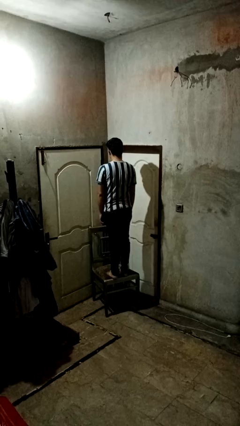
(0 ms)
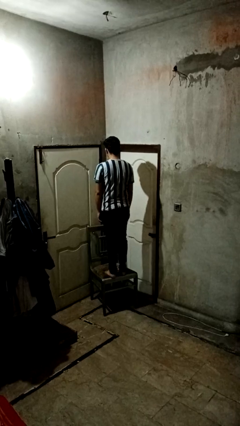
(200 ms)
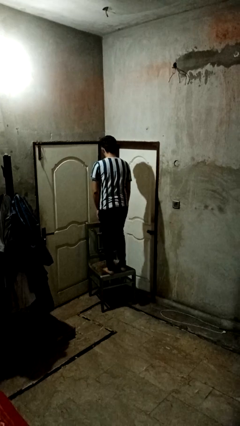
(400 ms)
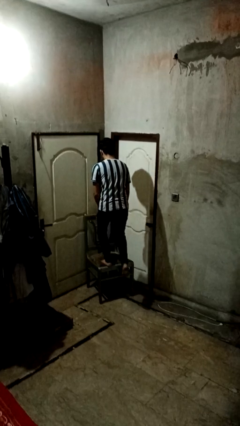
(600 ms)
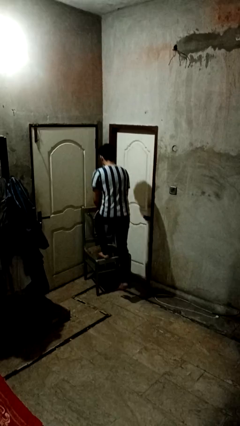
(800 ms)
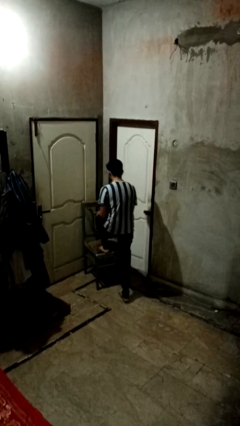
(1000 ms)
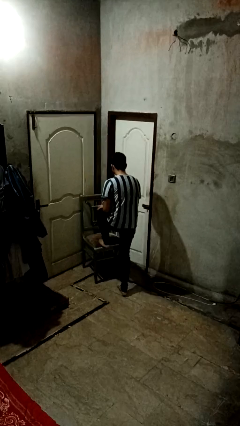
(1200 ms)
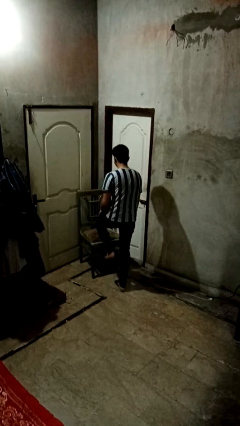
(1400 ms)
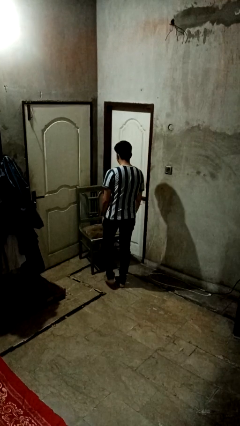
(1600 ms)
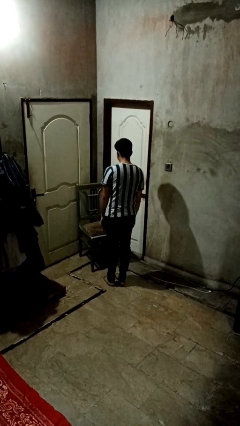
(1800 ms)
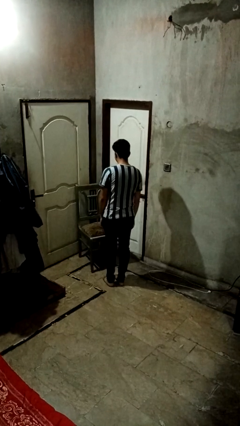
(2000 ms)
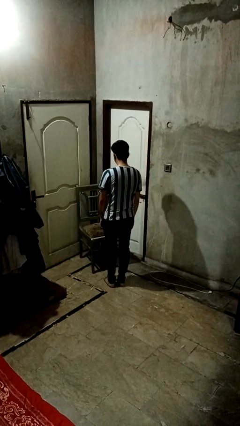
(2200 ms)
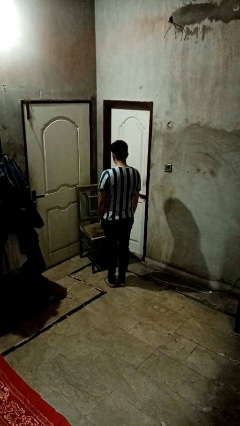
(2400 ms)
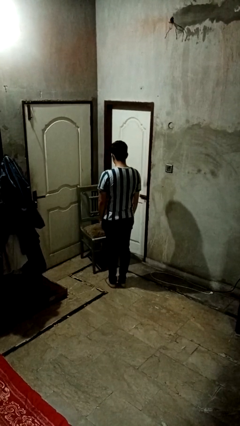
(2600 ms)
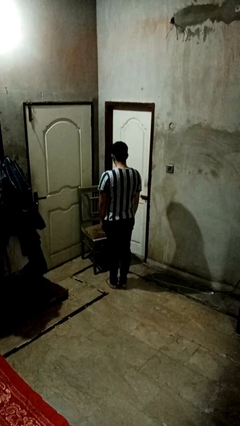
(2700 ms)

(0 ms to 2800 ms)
person climbs off chair

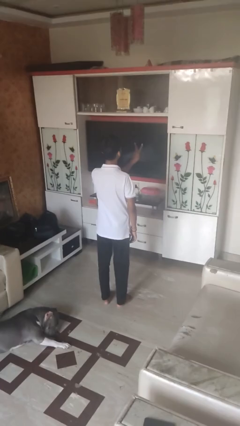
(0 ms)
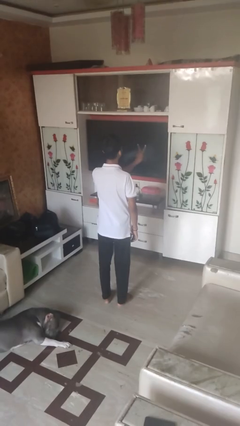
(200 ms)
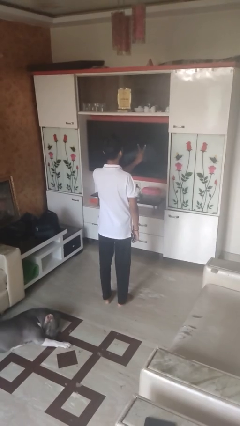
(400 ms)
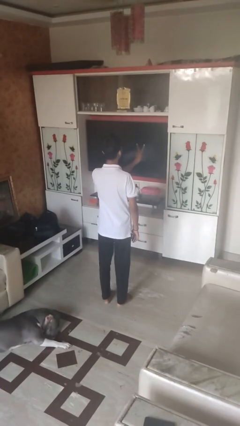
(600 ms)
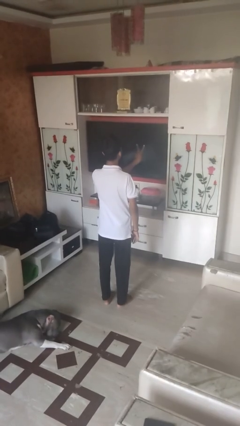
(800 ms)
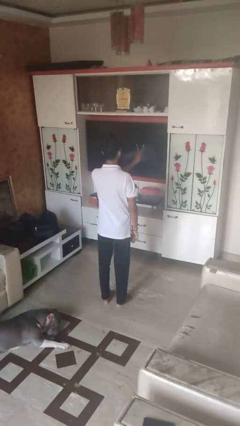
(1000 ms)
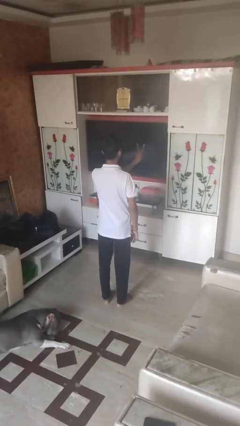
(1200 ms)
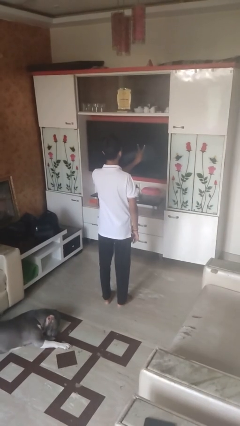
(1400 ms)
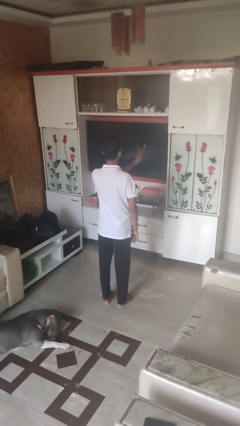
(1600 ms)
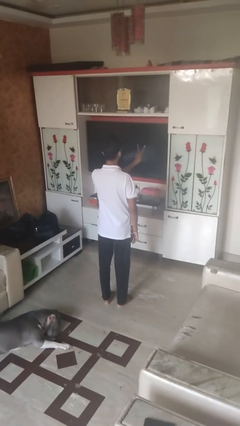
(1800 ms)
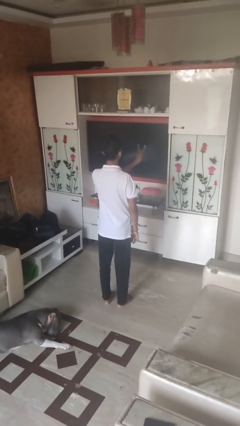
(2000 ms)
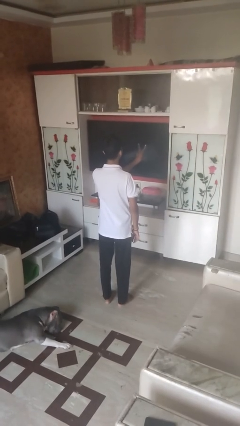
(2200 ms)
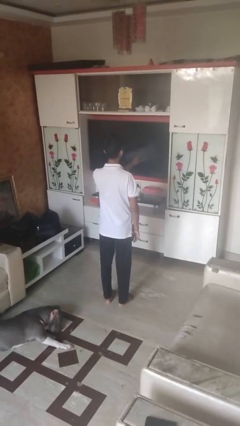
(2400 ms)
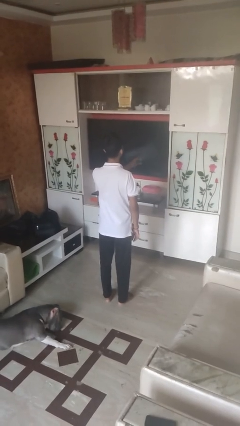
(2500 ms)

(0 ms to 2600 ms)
person gestures peace

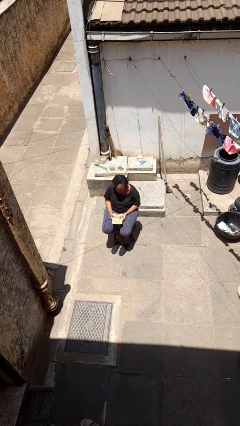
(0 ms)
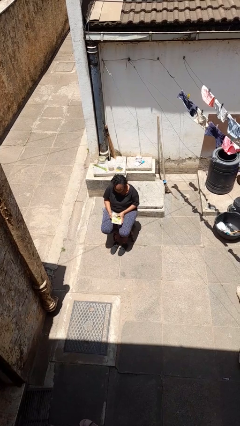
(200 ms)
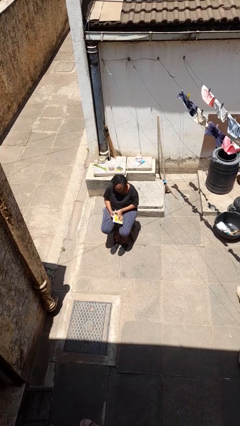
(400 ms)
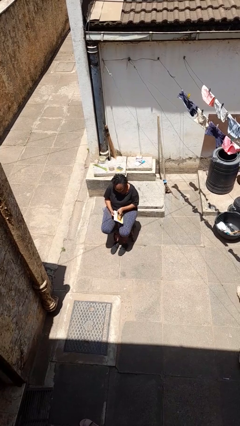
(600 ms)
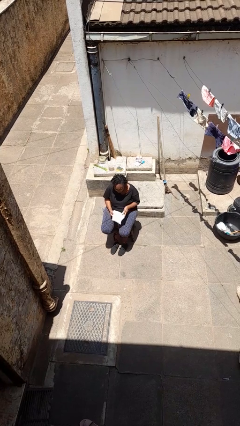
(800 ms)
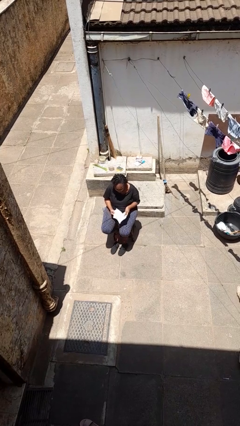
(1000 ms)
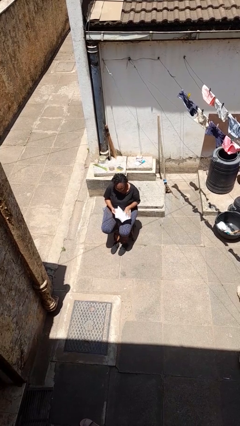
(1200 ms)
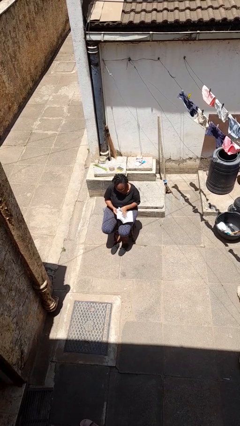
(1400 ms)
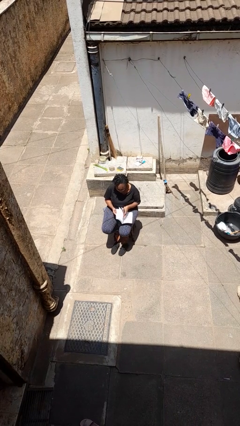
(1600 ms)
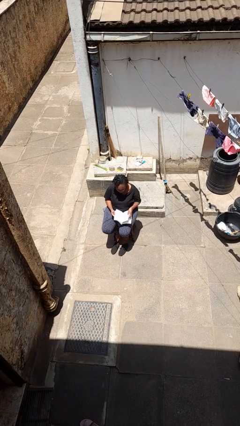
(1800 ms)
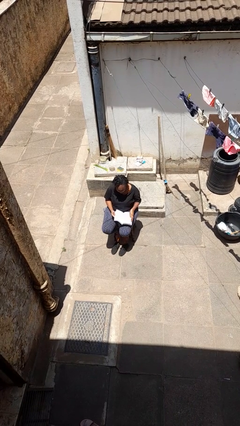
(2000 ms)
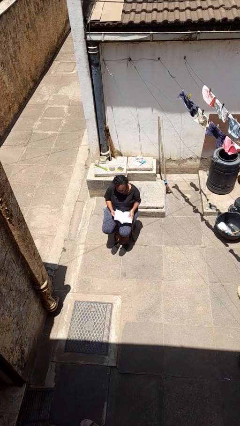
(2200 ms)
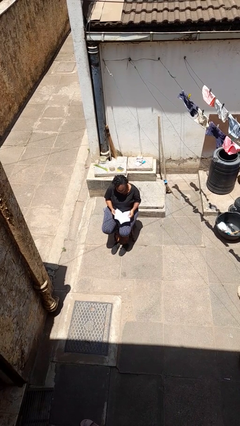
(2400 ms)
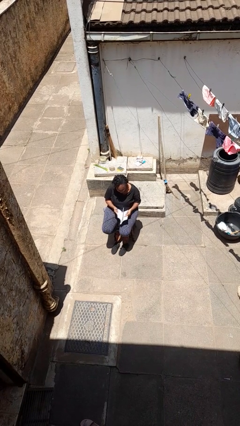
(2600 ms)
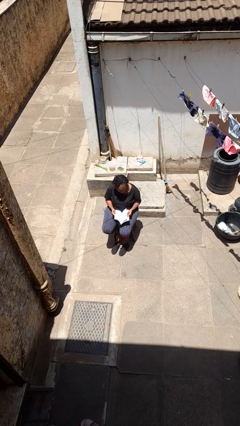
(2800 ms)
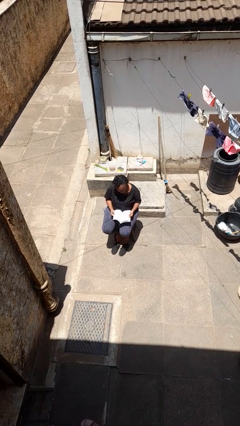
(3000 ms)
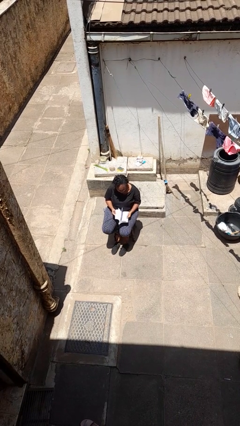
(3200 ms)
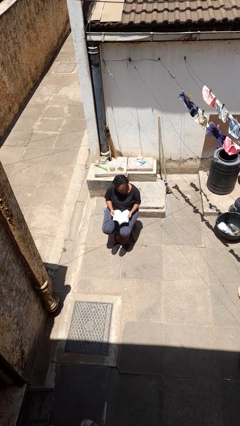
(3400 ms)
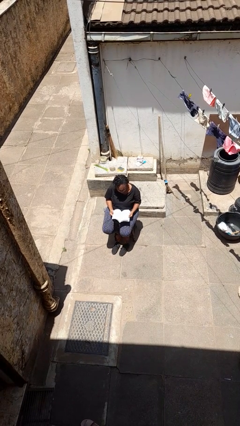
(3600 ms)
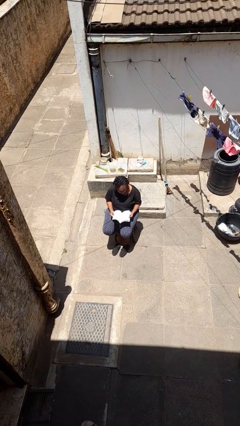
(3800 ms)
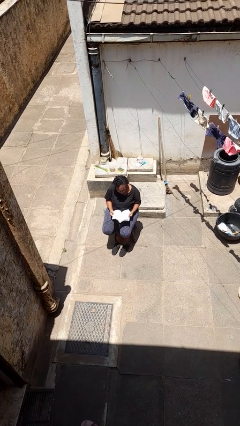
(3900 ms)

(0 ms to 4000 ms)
person reads book

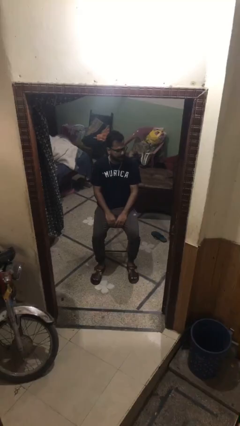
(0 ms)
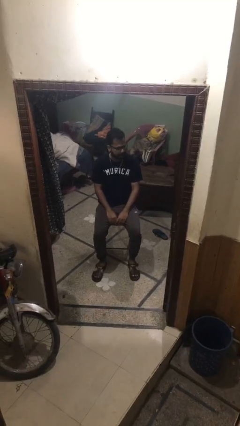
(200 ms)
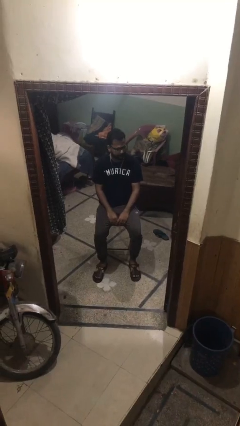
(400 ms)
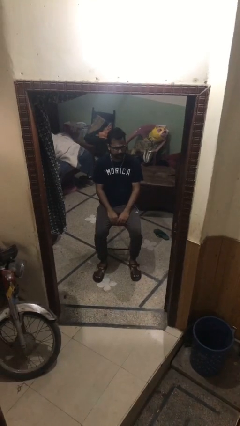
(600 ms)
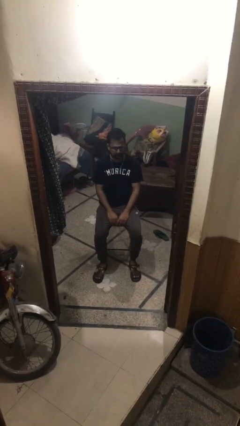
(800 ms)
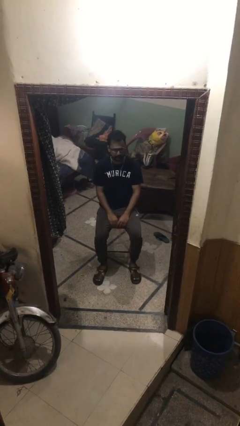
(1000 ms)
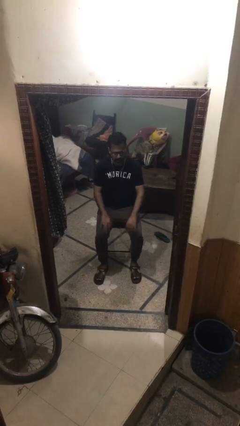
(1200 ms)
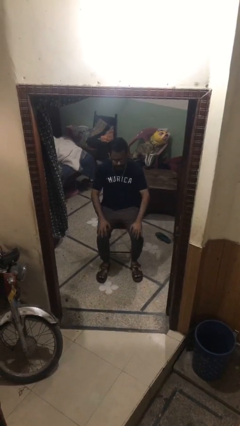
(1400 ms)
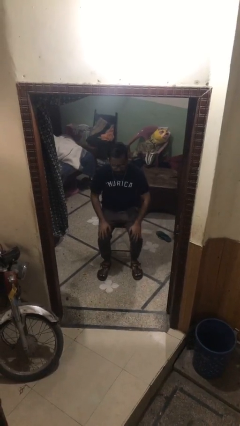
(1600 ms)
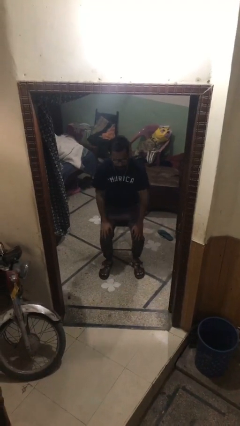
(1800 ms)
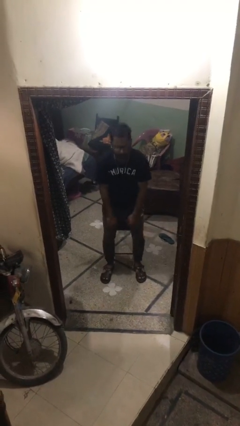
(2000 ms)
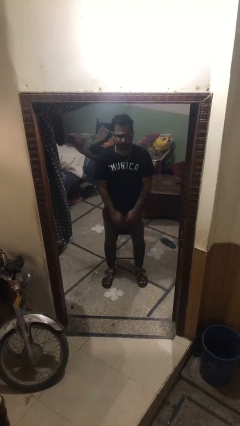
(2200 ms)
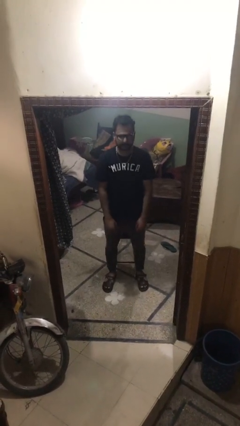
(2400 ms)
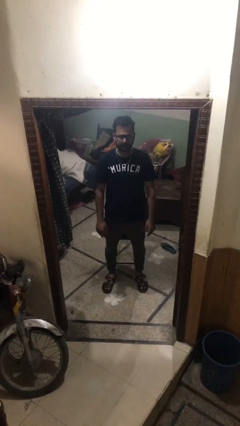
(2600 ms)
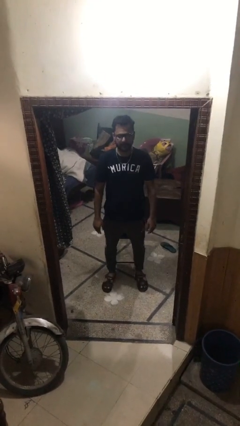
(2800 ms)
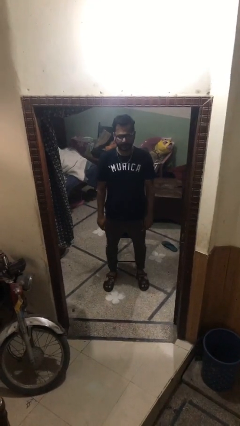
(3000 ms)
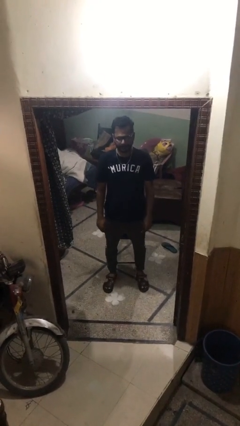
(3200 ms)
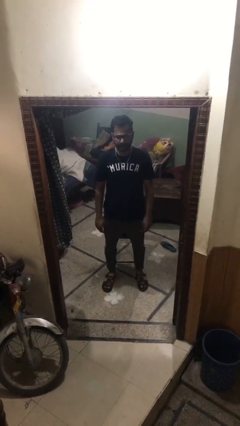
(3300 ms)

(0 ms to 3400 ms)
person stands up

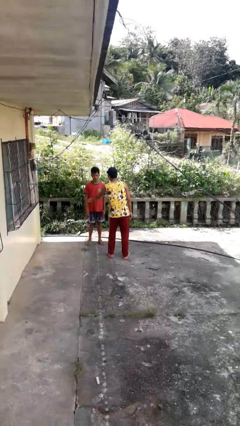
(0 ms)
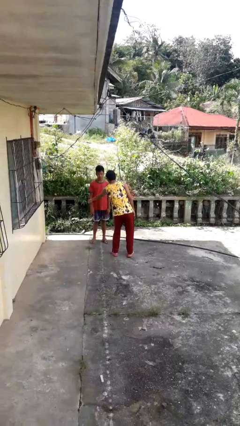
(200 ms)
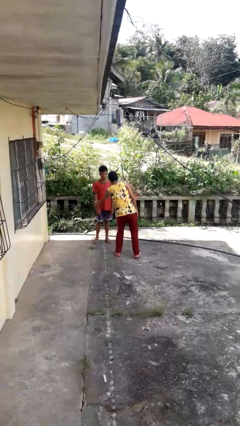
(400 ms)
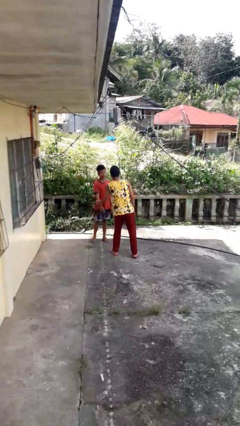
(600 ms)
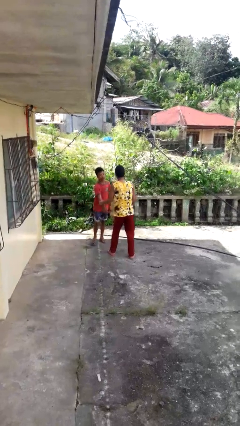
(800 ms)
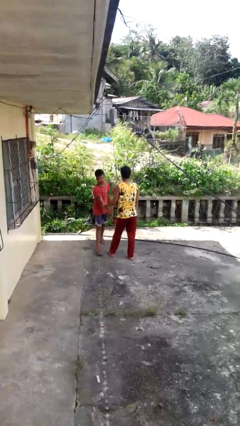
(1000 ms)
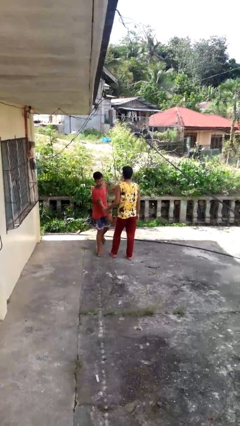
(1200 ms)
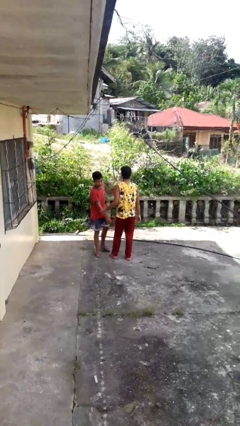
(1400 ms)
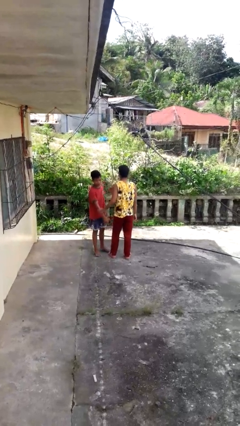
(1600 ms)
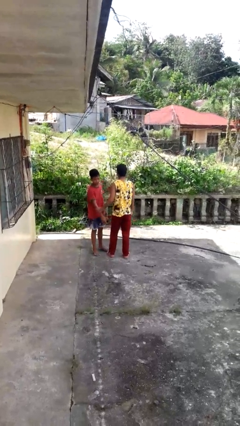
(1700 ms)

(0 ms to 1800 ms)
person grabs person by forearm

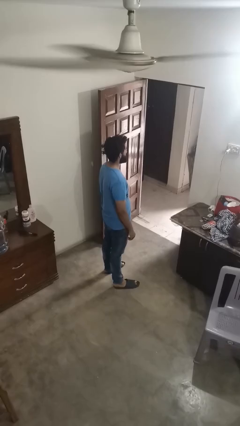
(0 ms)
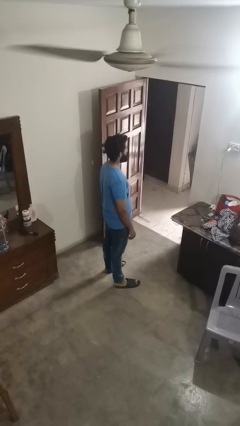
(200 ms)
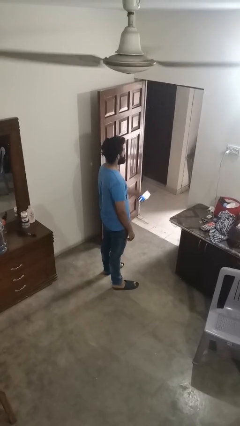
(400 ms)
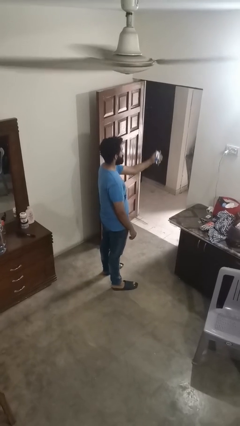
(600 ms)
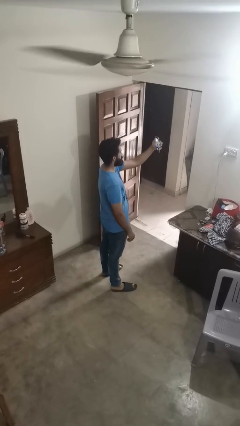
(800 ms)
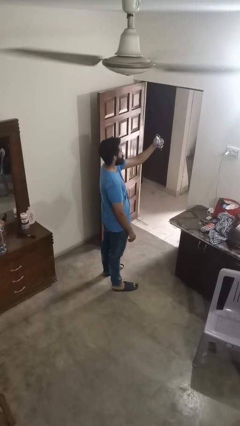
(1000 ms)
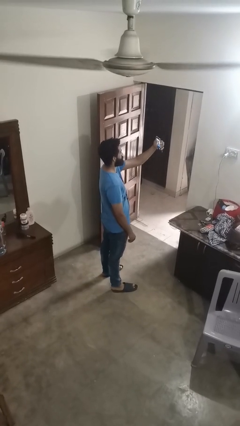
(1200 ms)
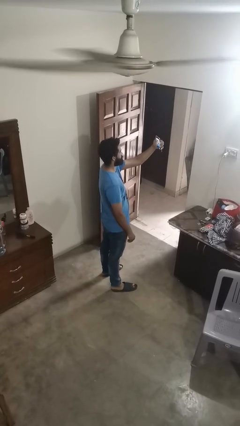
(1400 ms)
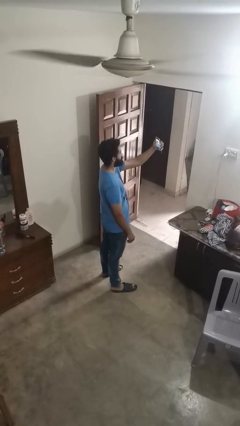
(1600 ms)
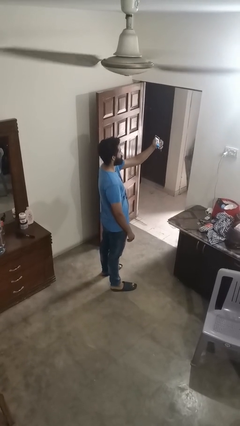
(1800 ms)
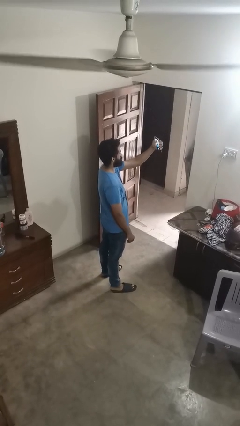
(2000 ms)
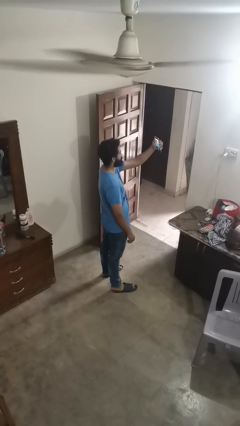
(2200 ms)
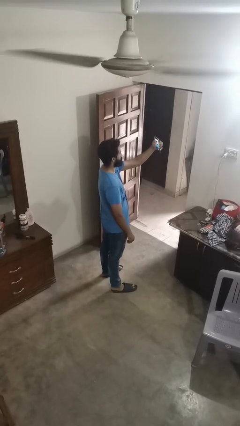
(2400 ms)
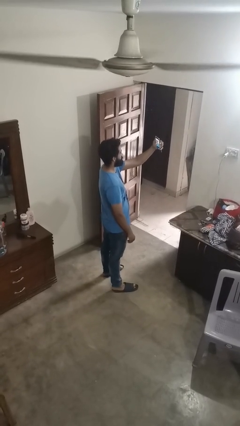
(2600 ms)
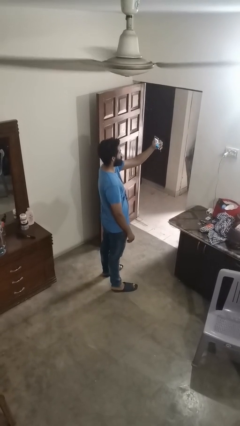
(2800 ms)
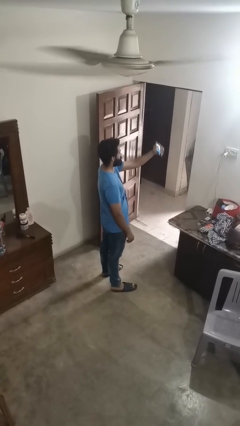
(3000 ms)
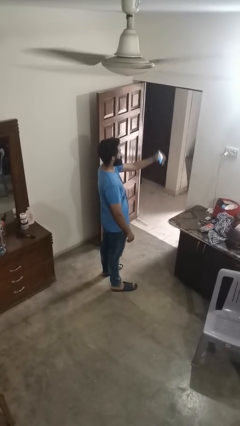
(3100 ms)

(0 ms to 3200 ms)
person takes selfie
